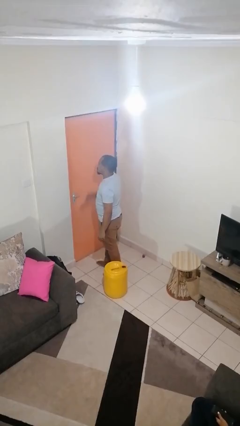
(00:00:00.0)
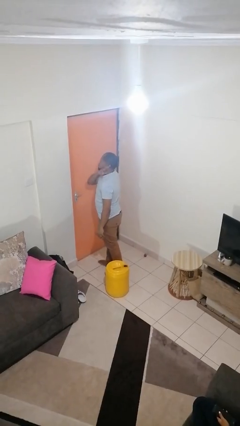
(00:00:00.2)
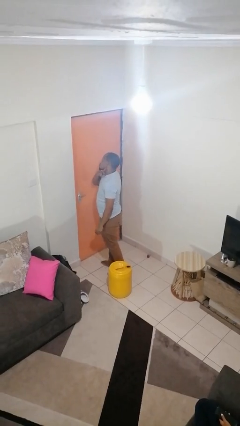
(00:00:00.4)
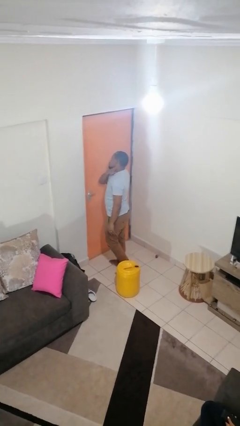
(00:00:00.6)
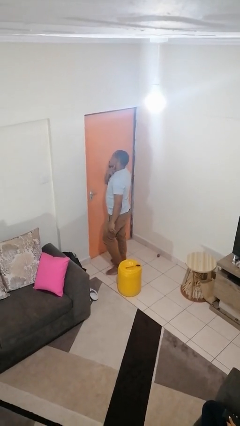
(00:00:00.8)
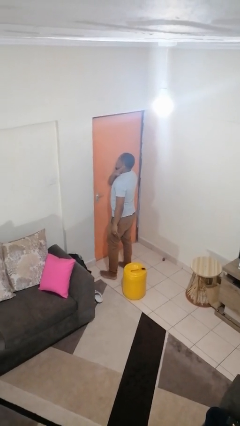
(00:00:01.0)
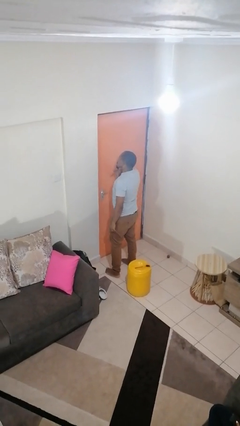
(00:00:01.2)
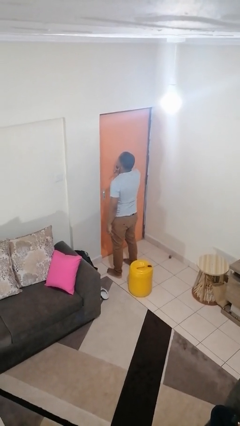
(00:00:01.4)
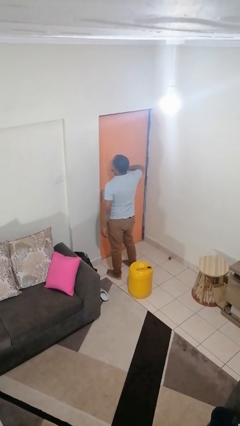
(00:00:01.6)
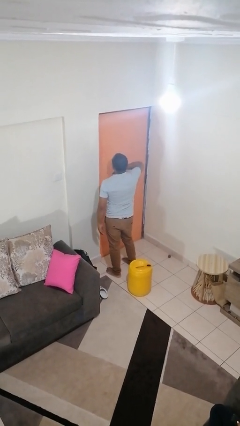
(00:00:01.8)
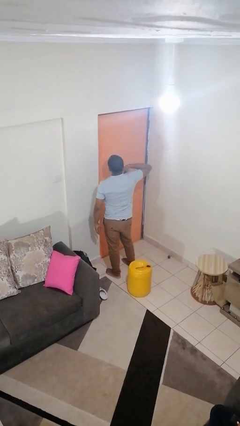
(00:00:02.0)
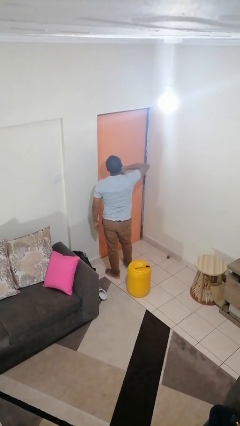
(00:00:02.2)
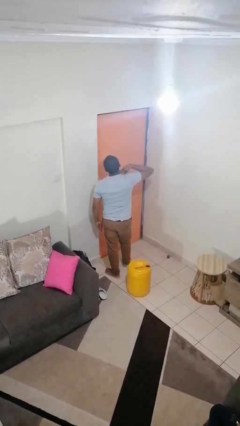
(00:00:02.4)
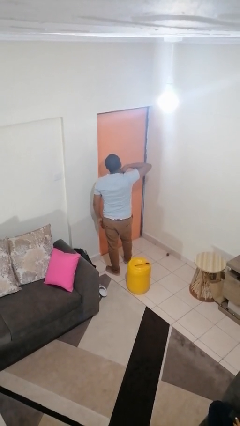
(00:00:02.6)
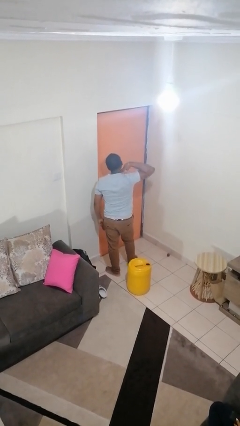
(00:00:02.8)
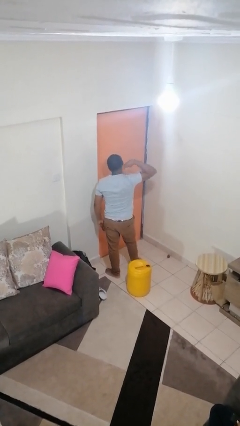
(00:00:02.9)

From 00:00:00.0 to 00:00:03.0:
person gestures cut

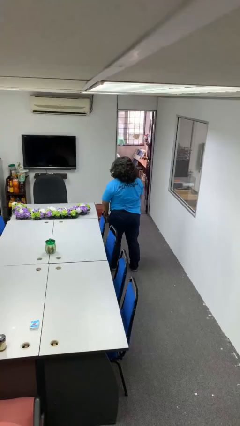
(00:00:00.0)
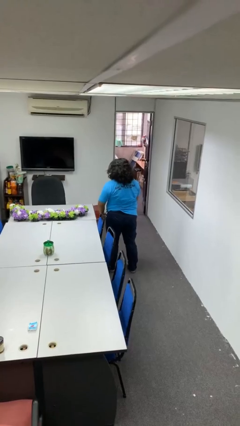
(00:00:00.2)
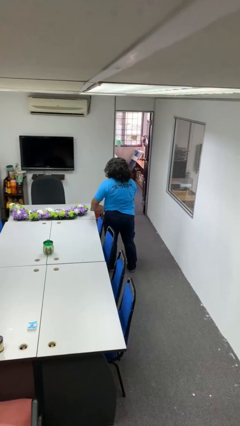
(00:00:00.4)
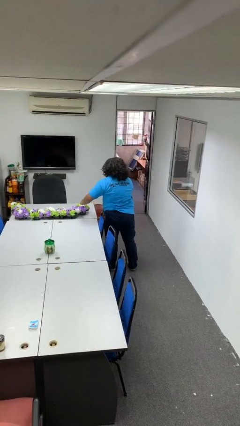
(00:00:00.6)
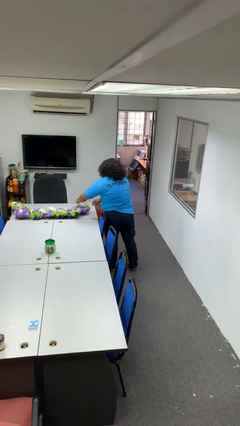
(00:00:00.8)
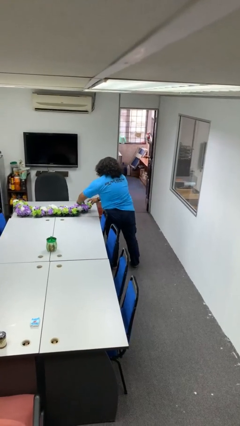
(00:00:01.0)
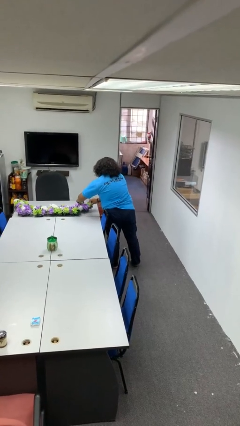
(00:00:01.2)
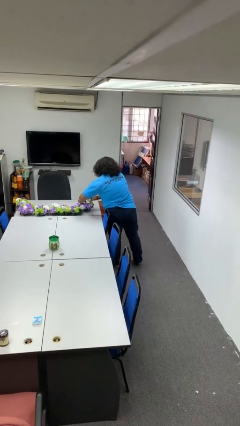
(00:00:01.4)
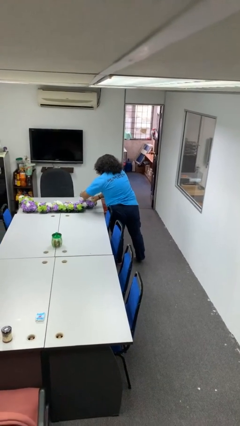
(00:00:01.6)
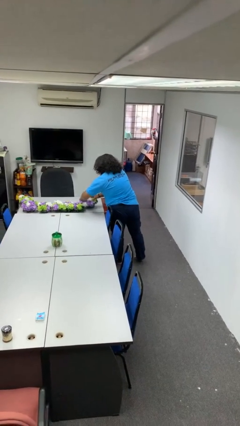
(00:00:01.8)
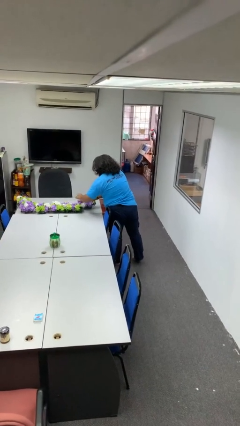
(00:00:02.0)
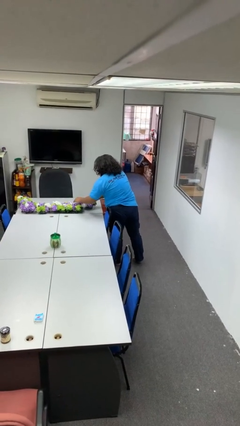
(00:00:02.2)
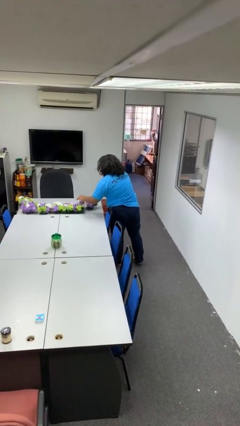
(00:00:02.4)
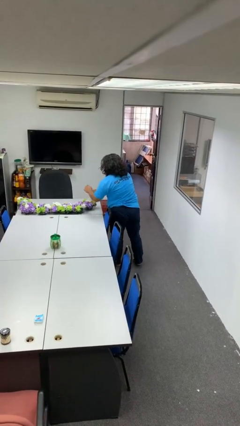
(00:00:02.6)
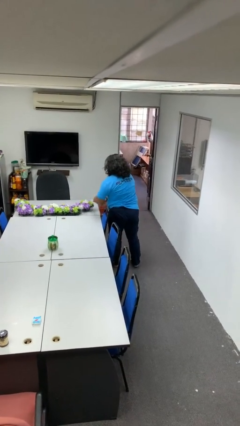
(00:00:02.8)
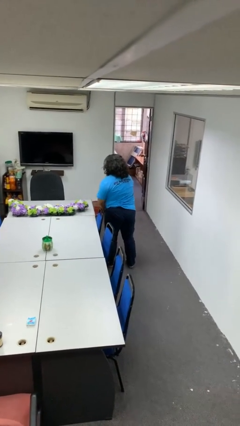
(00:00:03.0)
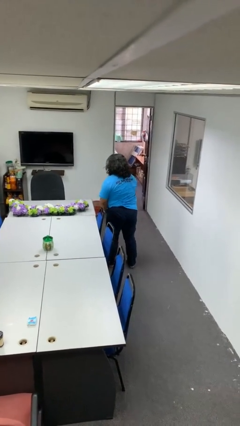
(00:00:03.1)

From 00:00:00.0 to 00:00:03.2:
person arranges flowers in vase

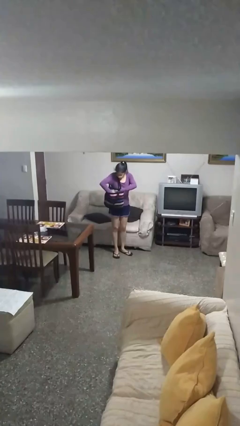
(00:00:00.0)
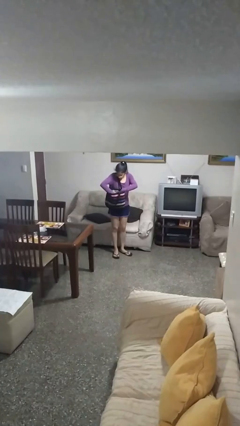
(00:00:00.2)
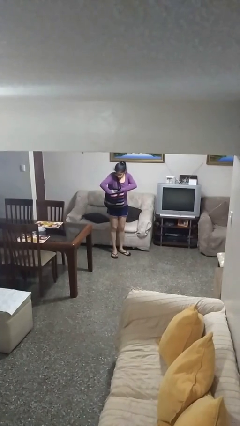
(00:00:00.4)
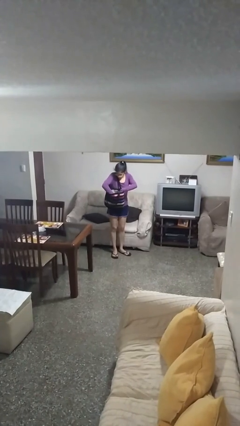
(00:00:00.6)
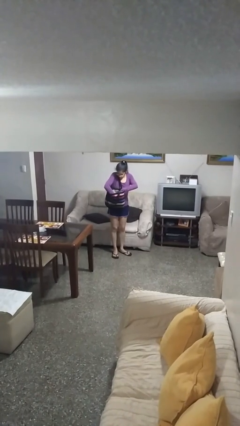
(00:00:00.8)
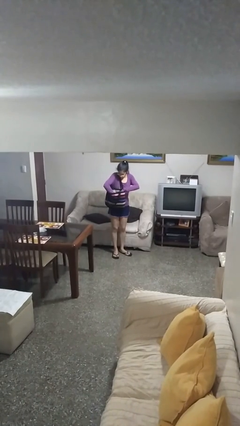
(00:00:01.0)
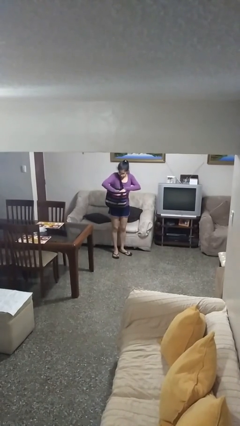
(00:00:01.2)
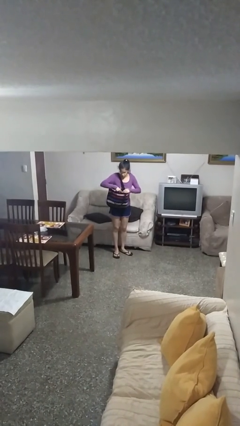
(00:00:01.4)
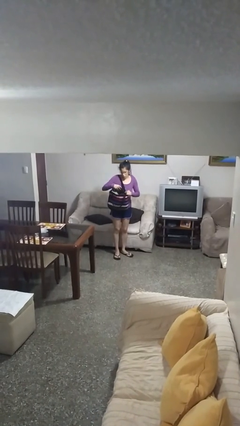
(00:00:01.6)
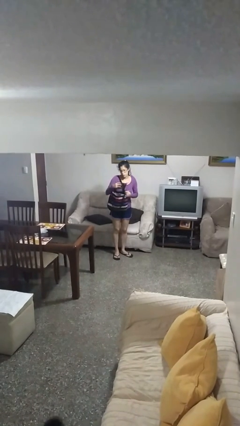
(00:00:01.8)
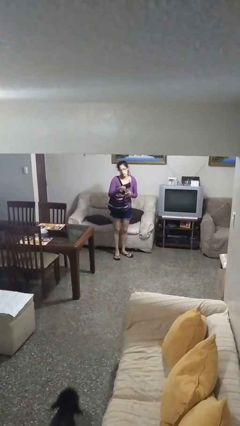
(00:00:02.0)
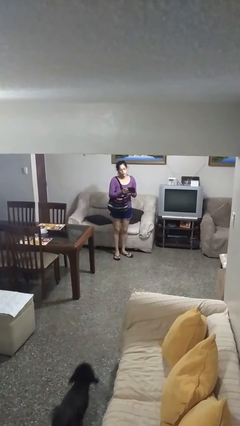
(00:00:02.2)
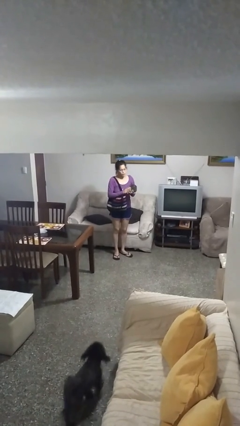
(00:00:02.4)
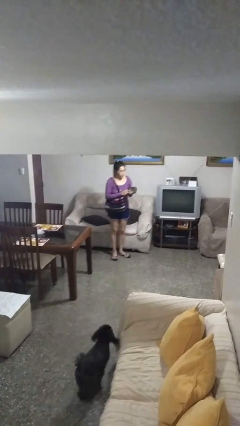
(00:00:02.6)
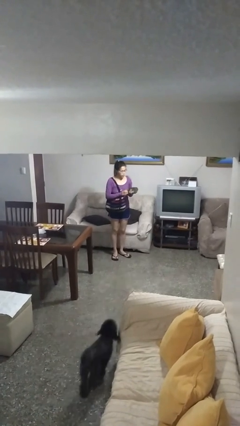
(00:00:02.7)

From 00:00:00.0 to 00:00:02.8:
person takes object from purse

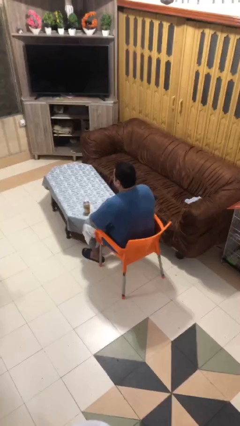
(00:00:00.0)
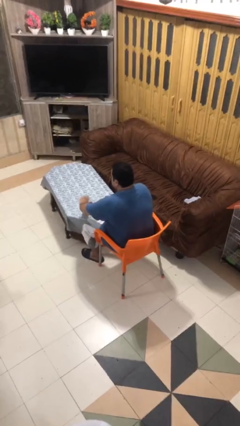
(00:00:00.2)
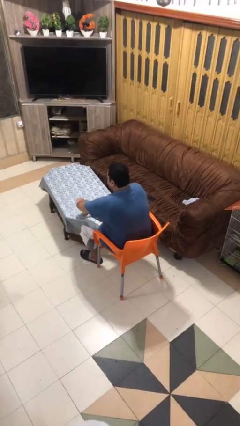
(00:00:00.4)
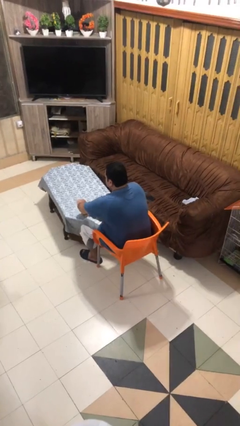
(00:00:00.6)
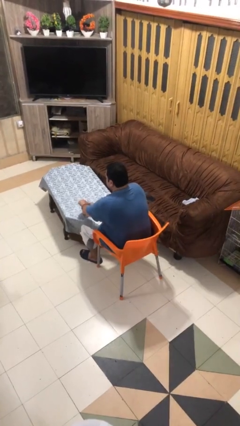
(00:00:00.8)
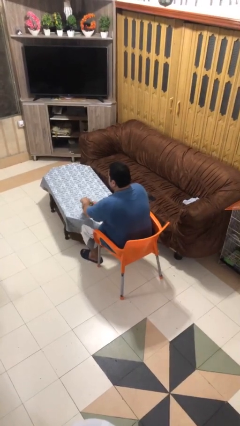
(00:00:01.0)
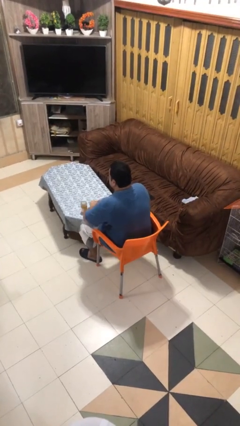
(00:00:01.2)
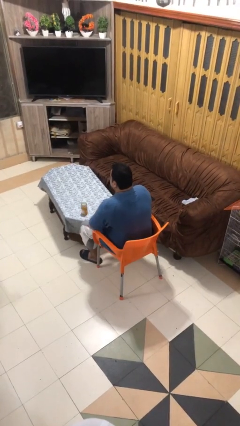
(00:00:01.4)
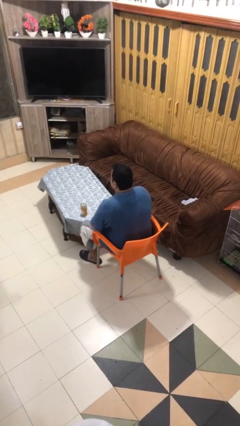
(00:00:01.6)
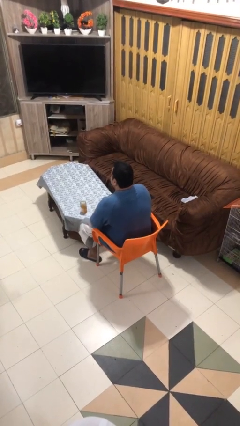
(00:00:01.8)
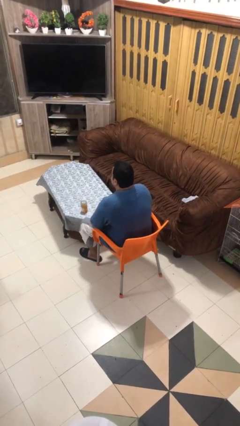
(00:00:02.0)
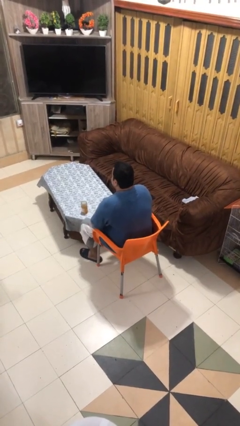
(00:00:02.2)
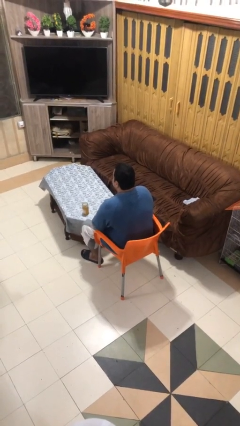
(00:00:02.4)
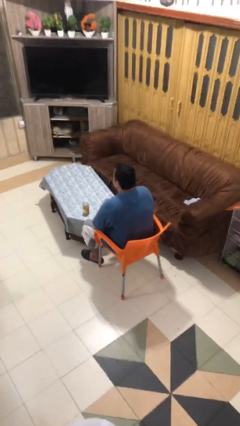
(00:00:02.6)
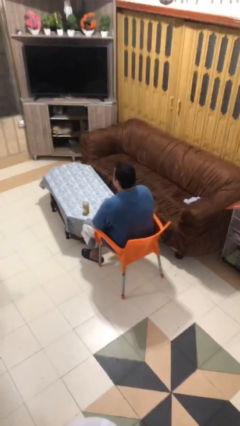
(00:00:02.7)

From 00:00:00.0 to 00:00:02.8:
person opens jar

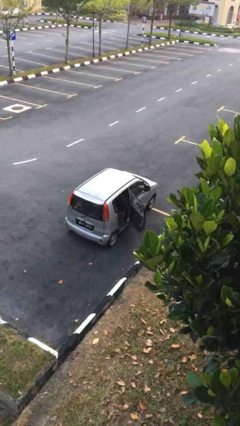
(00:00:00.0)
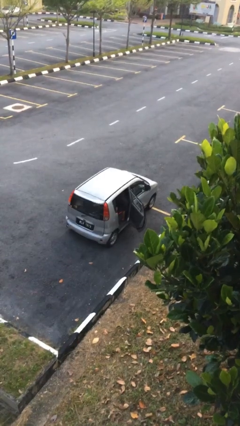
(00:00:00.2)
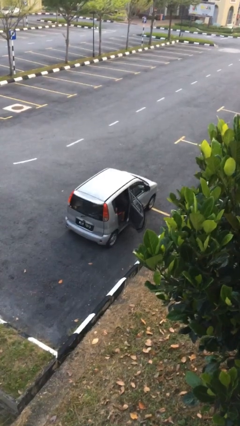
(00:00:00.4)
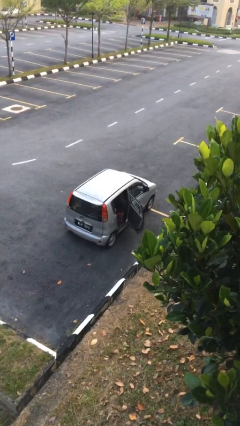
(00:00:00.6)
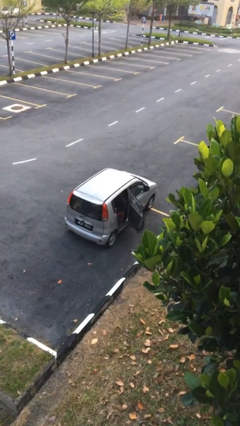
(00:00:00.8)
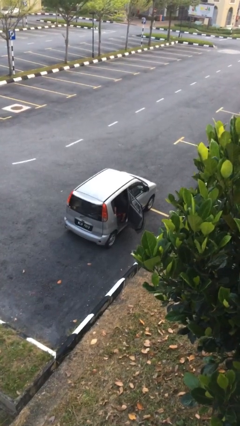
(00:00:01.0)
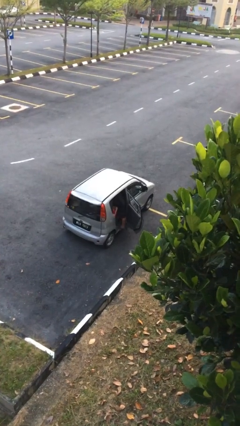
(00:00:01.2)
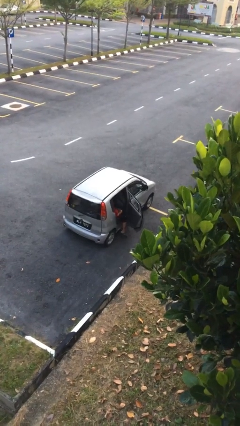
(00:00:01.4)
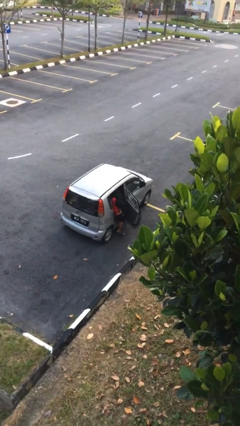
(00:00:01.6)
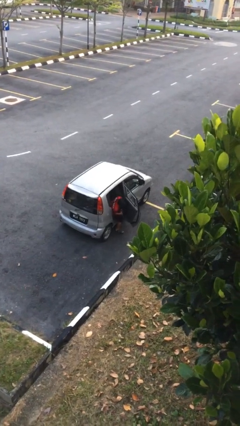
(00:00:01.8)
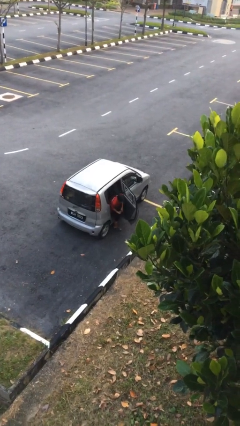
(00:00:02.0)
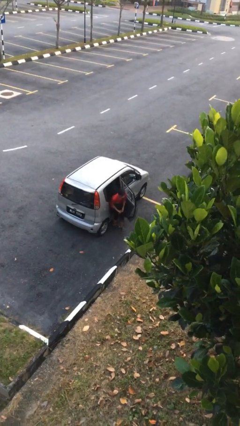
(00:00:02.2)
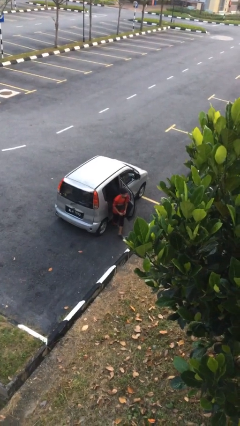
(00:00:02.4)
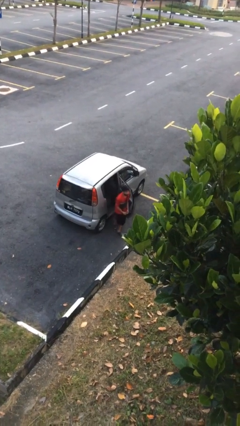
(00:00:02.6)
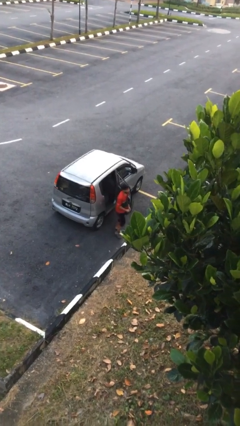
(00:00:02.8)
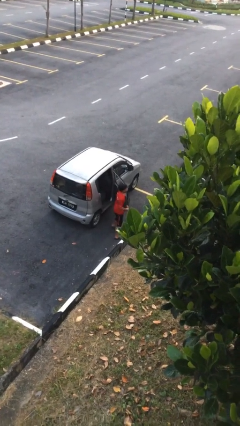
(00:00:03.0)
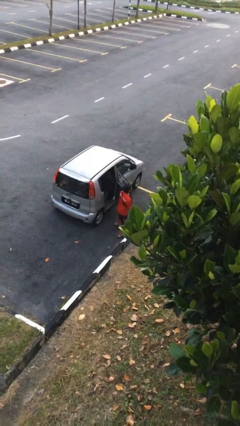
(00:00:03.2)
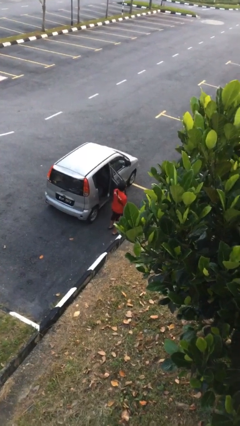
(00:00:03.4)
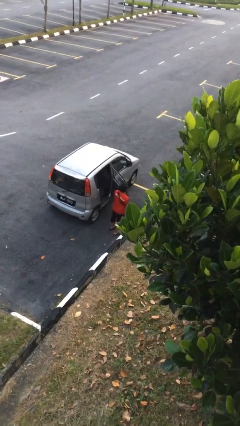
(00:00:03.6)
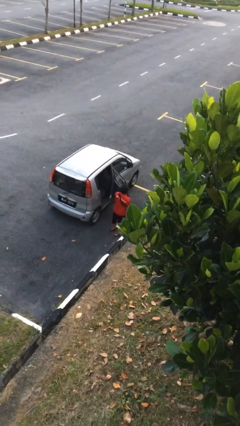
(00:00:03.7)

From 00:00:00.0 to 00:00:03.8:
person exits car

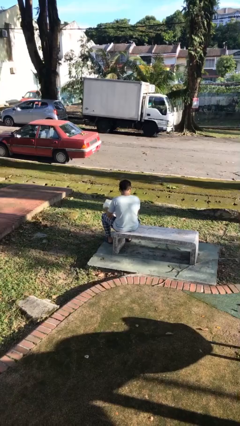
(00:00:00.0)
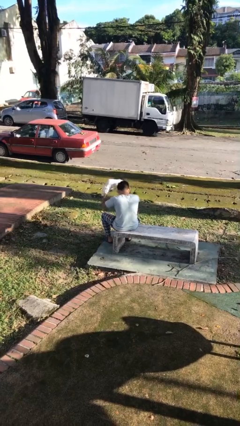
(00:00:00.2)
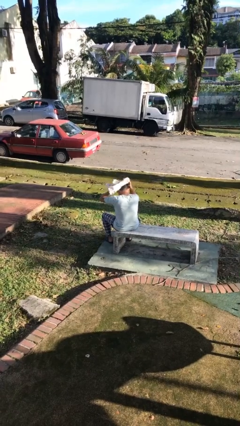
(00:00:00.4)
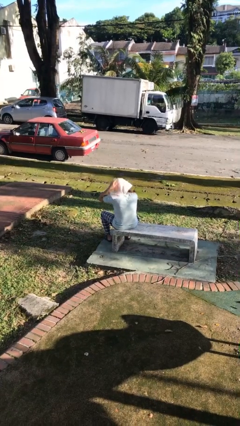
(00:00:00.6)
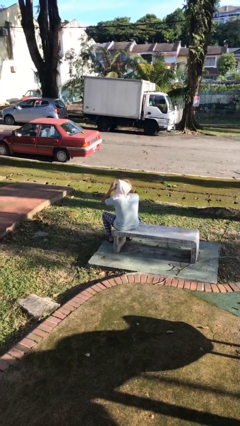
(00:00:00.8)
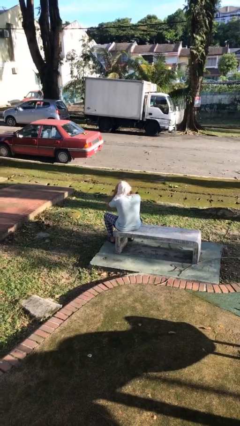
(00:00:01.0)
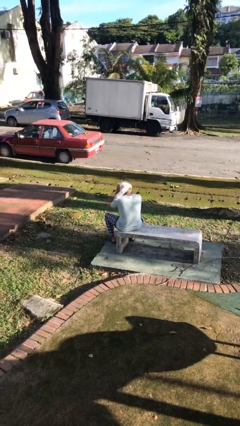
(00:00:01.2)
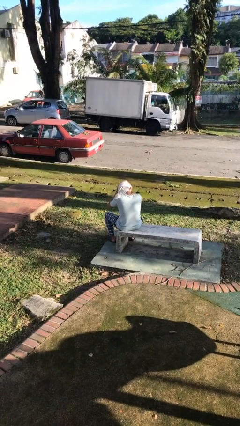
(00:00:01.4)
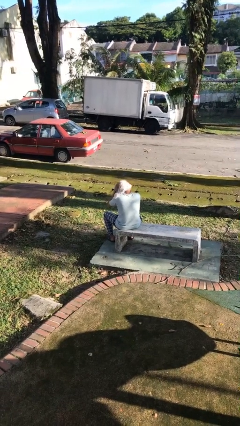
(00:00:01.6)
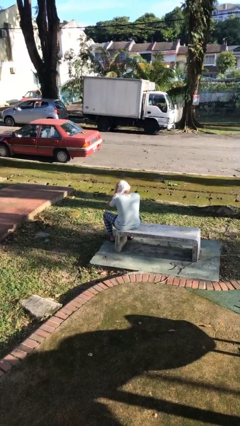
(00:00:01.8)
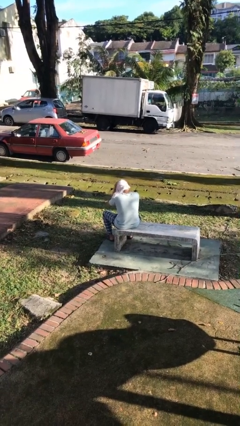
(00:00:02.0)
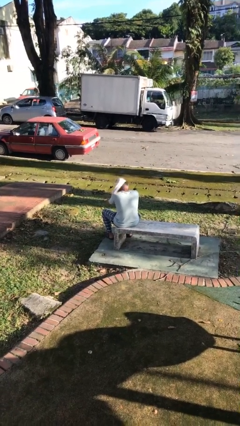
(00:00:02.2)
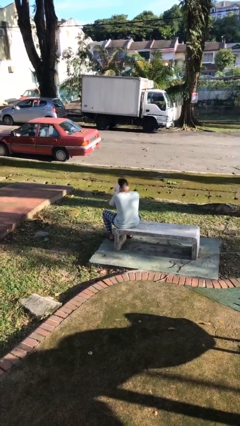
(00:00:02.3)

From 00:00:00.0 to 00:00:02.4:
person dries hair with towel
